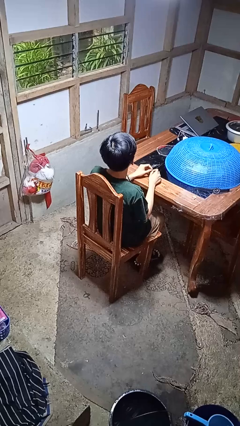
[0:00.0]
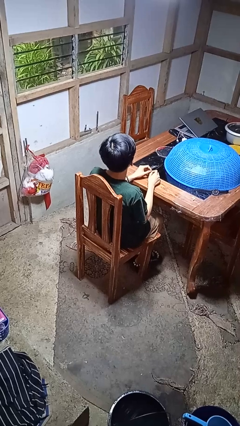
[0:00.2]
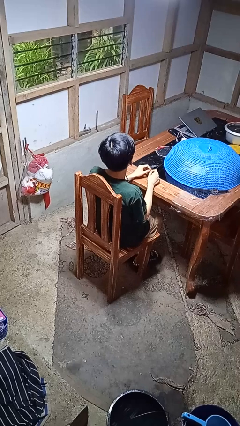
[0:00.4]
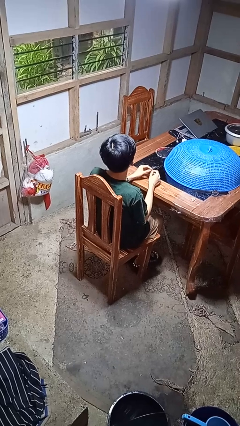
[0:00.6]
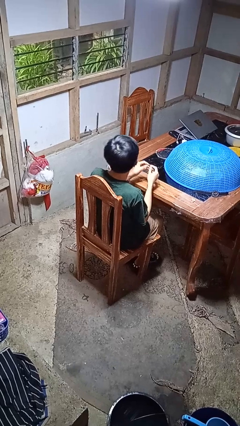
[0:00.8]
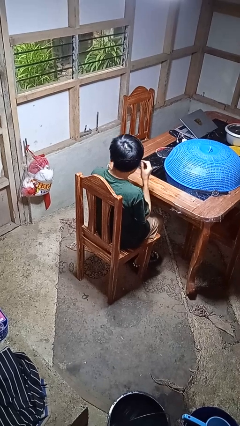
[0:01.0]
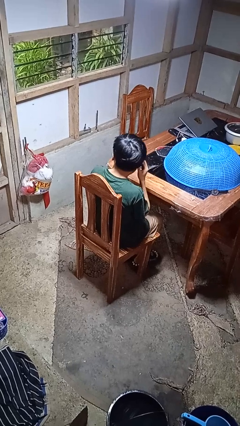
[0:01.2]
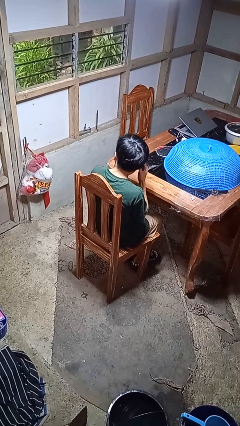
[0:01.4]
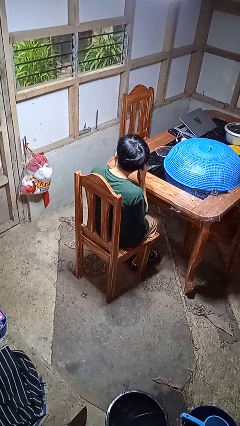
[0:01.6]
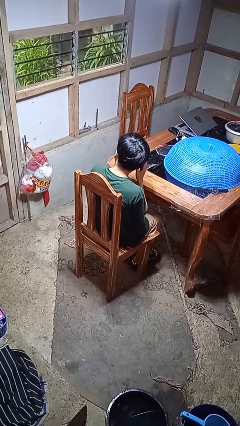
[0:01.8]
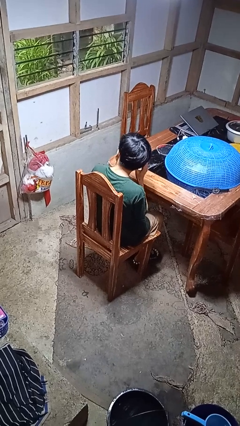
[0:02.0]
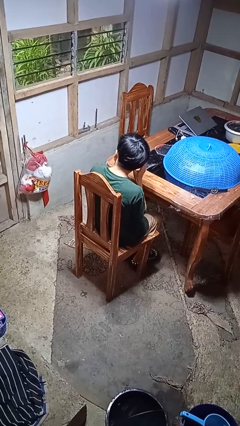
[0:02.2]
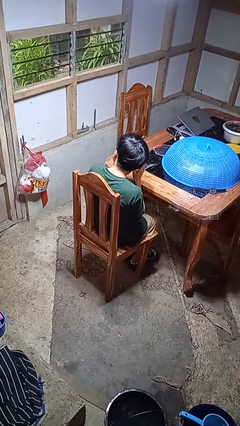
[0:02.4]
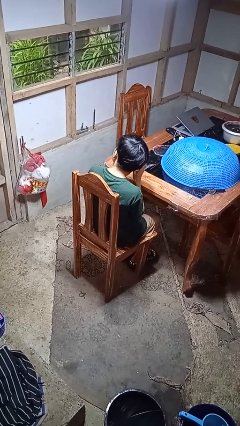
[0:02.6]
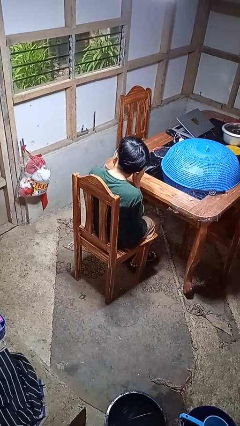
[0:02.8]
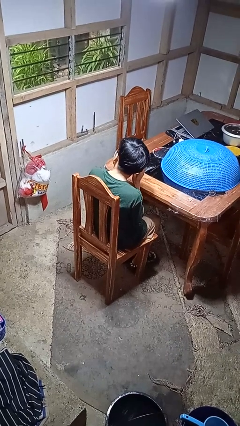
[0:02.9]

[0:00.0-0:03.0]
person takes off earrings

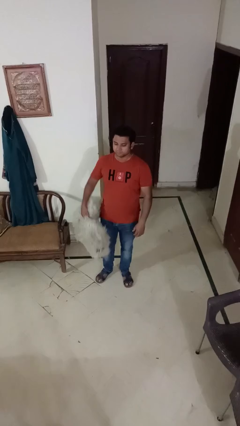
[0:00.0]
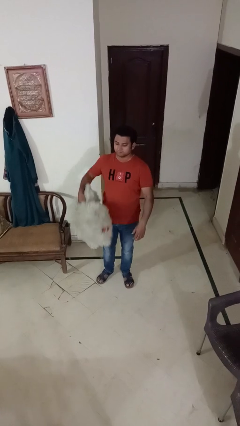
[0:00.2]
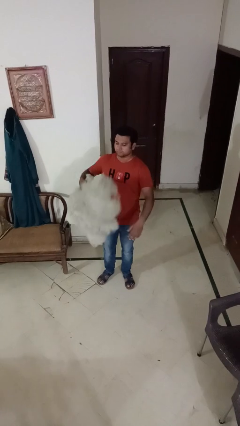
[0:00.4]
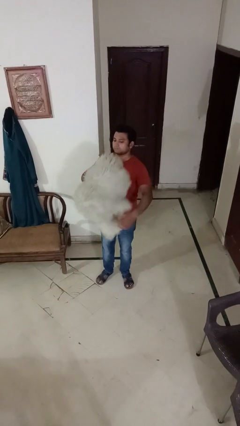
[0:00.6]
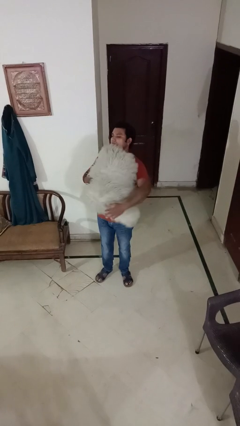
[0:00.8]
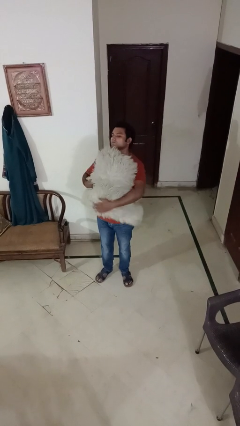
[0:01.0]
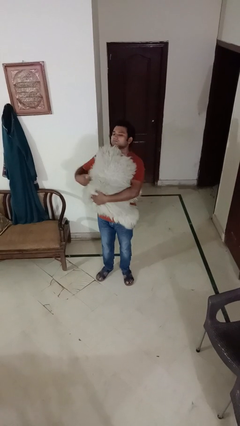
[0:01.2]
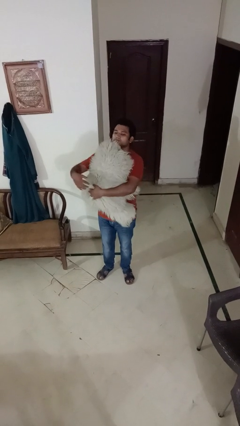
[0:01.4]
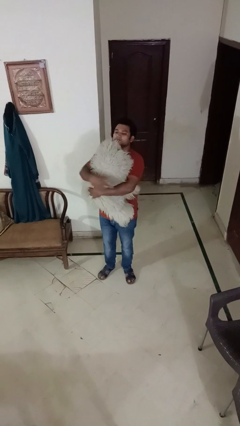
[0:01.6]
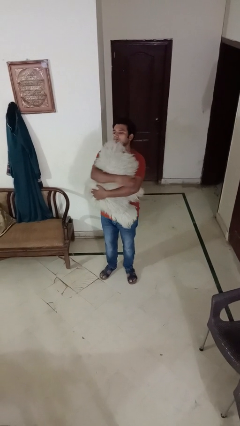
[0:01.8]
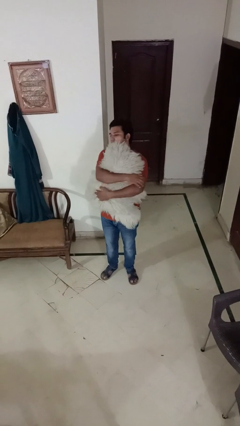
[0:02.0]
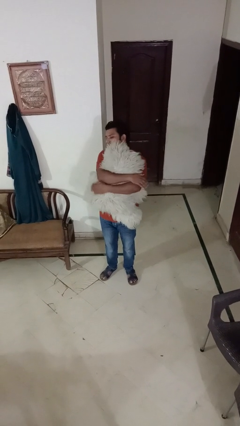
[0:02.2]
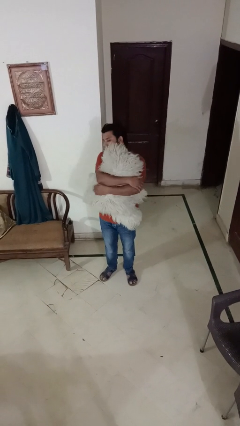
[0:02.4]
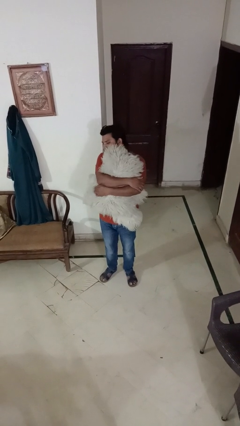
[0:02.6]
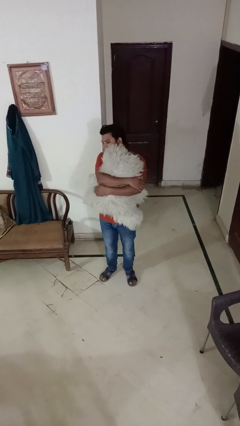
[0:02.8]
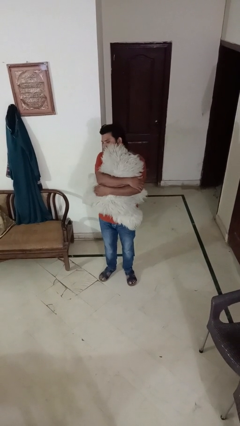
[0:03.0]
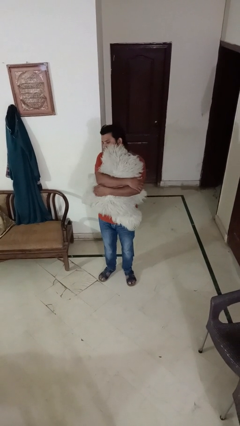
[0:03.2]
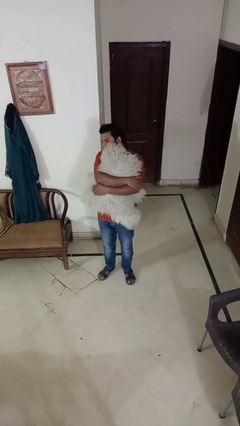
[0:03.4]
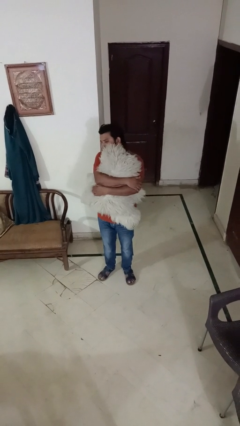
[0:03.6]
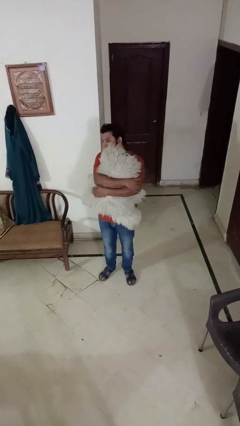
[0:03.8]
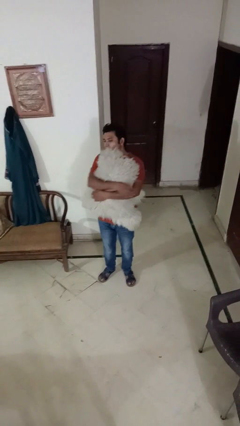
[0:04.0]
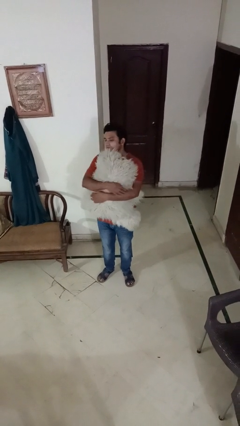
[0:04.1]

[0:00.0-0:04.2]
person hugs stuffed animal

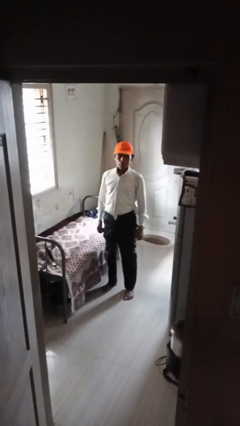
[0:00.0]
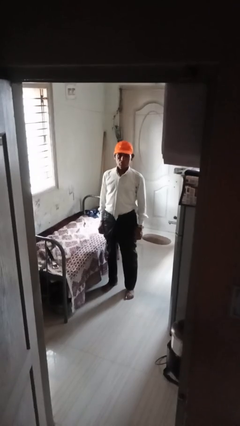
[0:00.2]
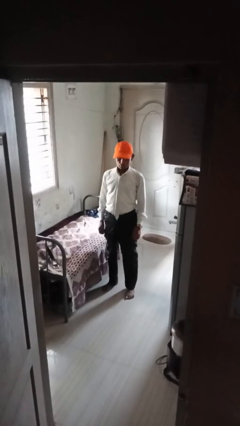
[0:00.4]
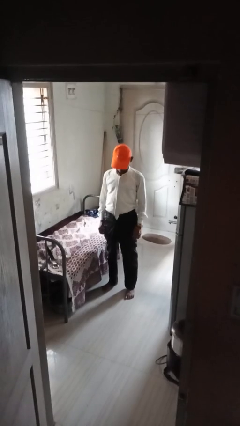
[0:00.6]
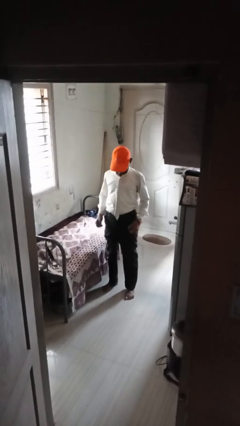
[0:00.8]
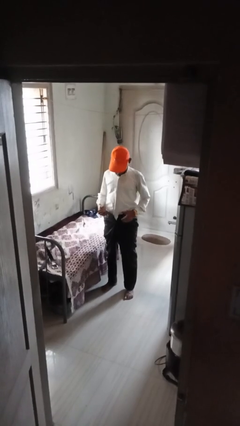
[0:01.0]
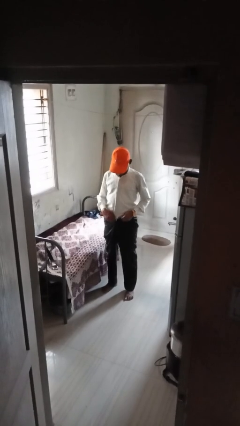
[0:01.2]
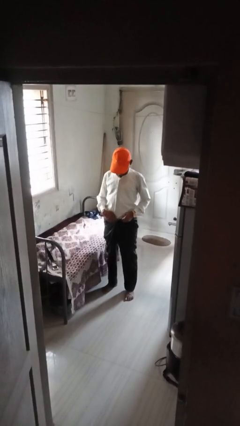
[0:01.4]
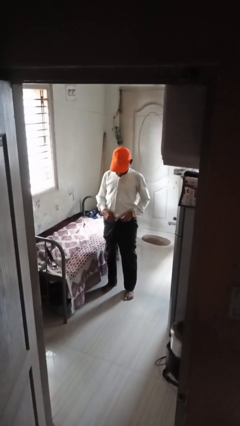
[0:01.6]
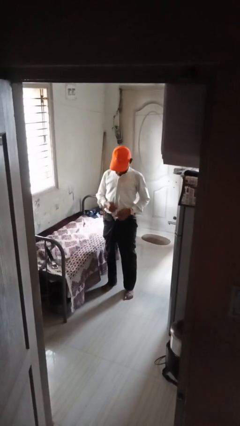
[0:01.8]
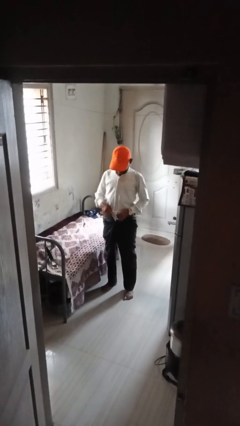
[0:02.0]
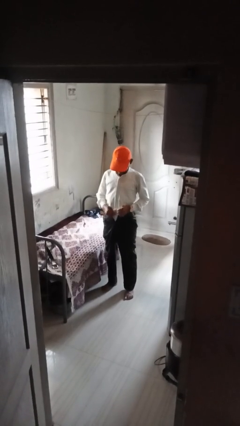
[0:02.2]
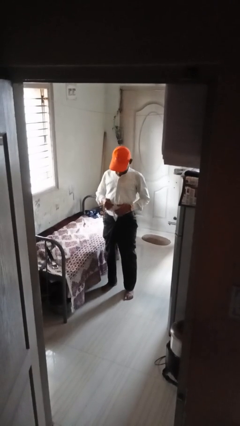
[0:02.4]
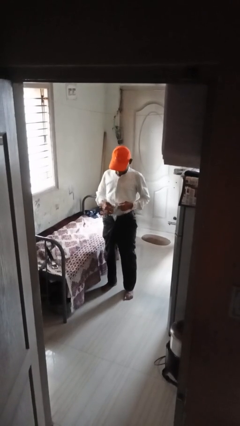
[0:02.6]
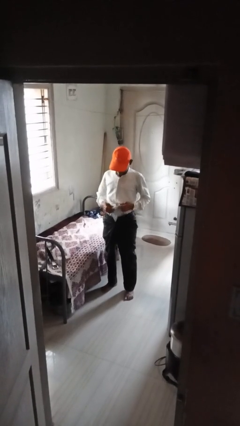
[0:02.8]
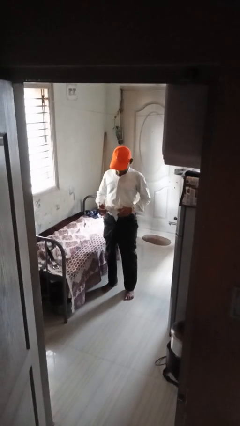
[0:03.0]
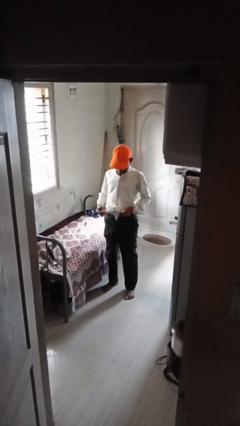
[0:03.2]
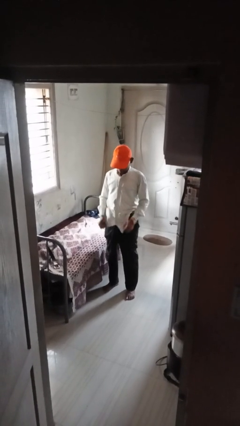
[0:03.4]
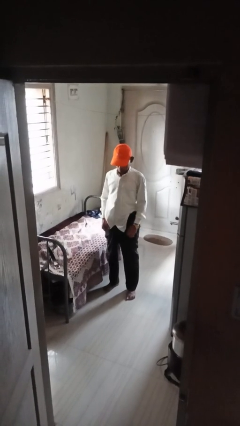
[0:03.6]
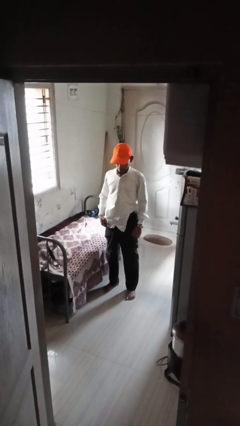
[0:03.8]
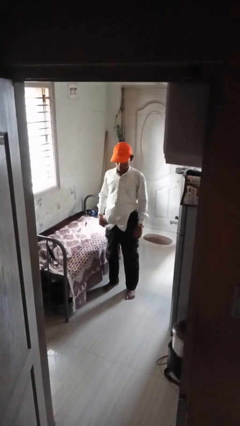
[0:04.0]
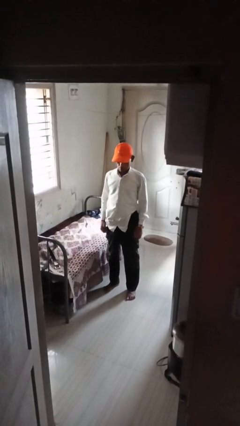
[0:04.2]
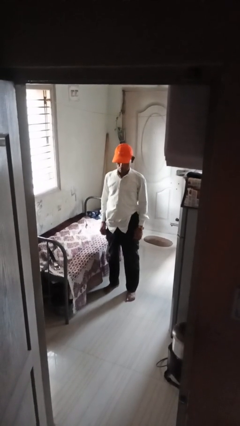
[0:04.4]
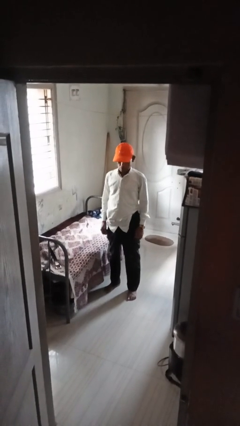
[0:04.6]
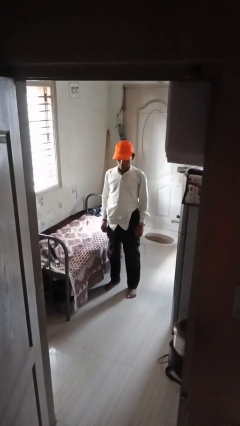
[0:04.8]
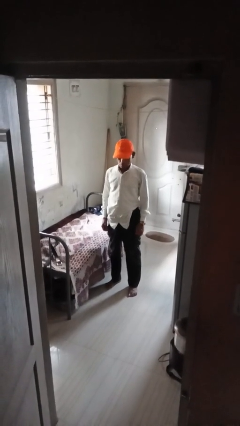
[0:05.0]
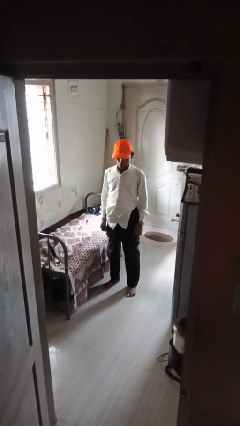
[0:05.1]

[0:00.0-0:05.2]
person untucks shirt

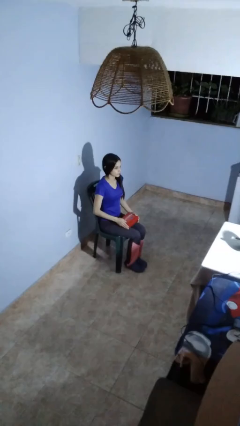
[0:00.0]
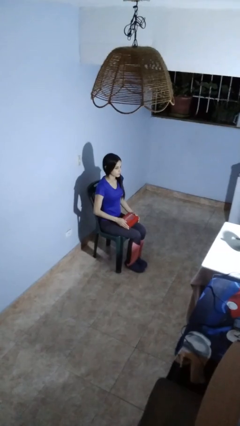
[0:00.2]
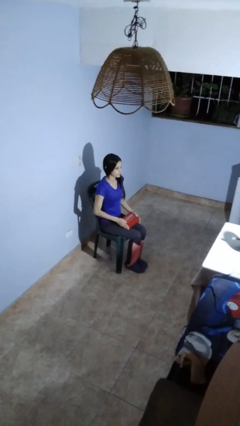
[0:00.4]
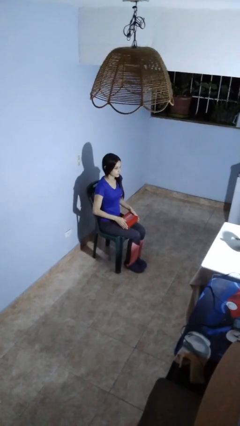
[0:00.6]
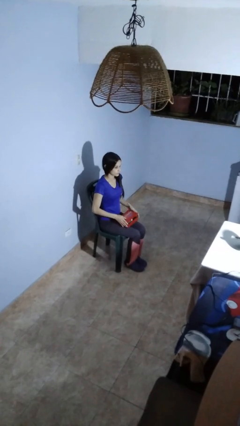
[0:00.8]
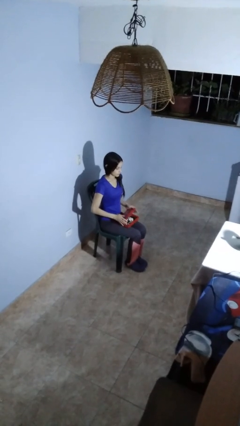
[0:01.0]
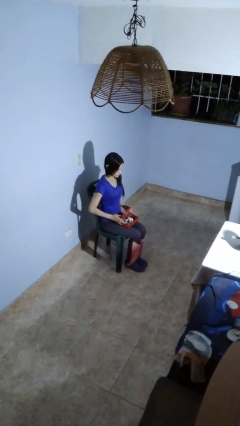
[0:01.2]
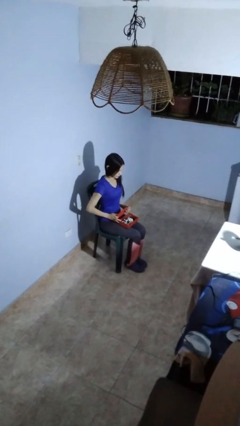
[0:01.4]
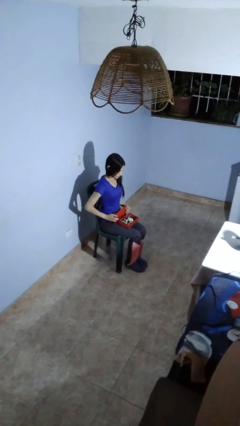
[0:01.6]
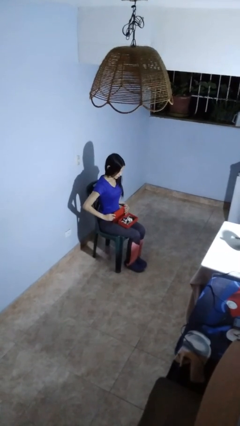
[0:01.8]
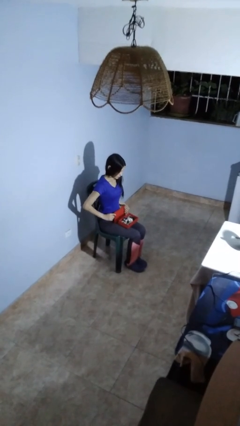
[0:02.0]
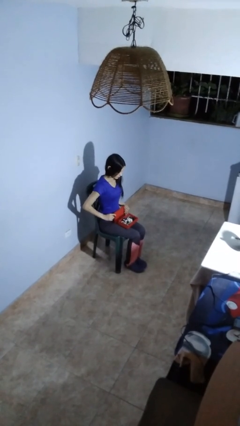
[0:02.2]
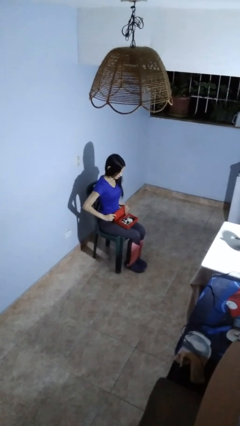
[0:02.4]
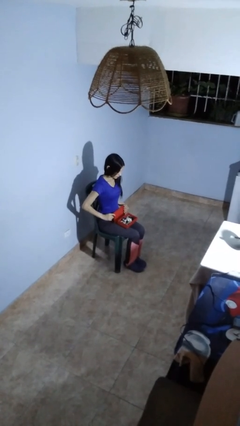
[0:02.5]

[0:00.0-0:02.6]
person opens jewelry box

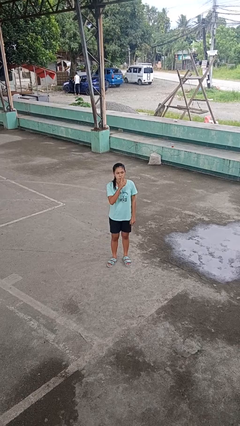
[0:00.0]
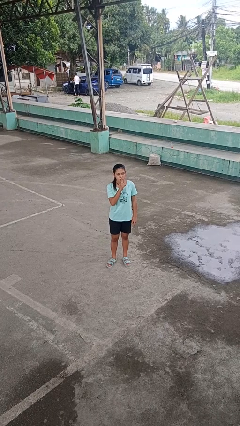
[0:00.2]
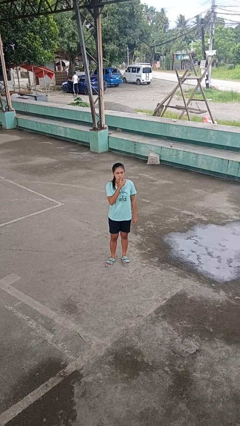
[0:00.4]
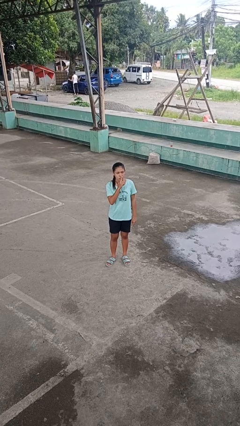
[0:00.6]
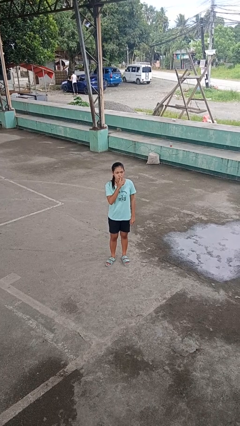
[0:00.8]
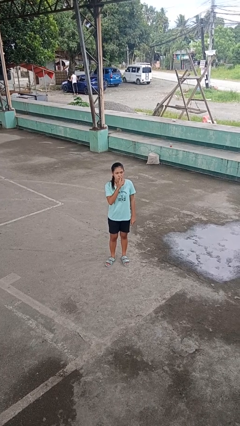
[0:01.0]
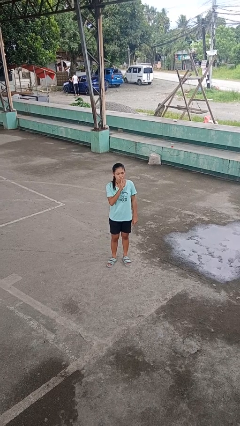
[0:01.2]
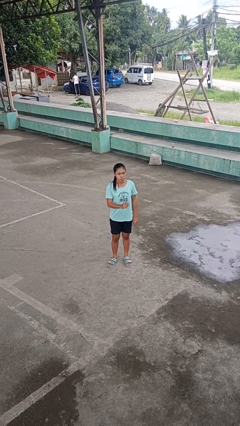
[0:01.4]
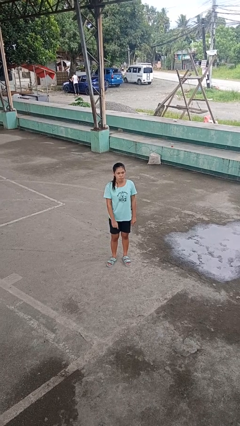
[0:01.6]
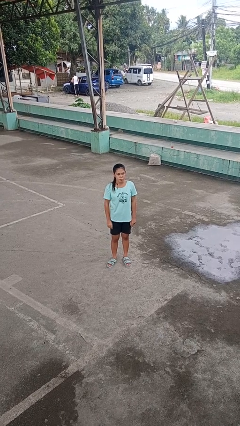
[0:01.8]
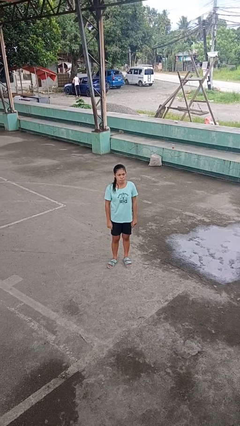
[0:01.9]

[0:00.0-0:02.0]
person gestures be quiet

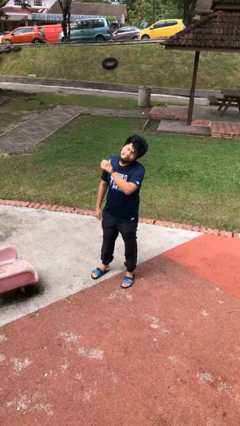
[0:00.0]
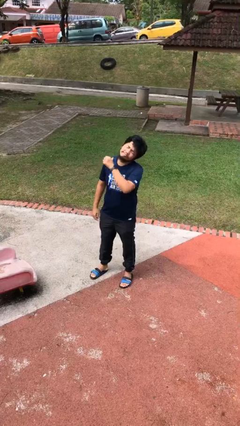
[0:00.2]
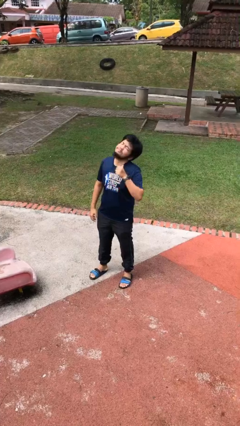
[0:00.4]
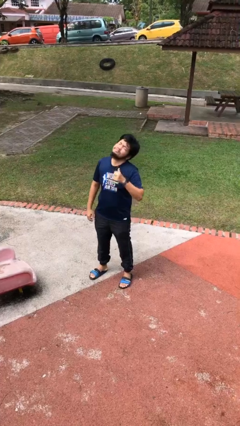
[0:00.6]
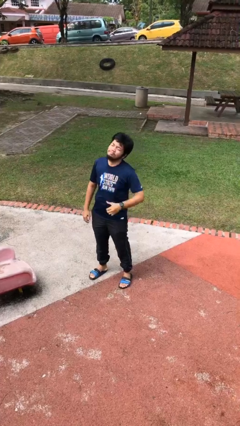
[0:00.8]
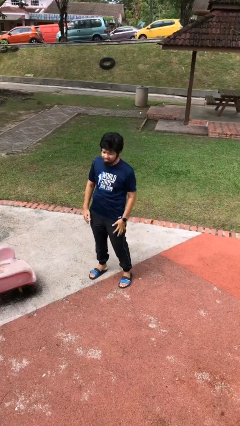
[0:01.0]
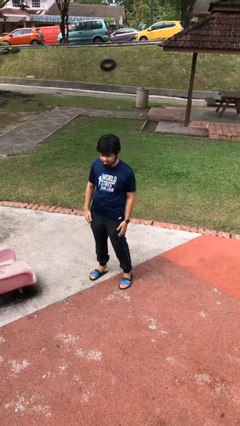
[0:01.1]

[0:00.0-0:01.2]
person gestures cut
